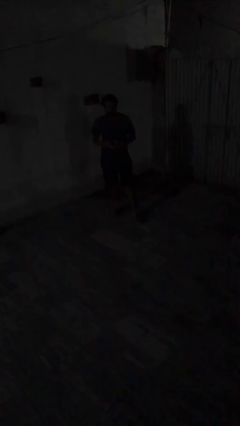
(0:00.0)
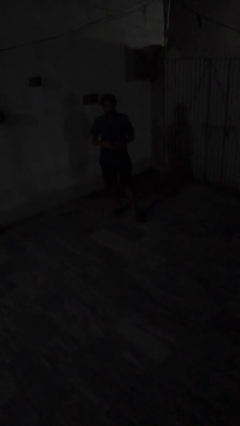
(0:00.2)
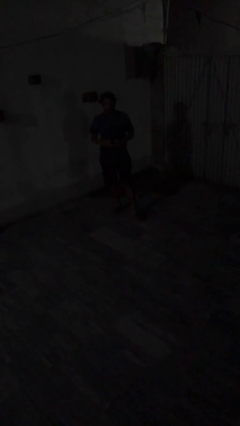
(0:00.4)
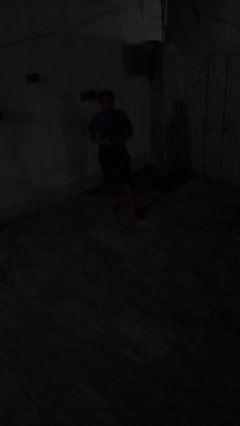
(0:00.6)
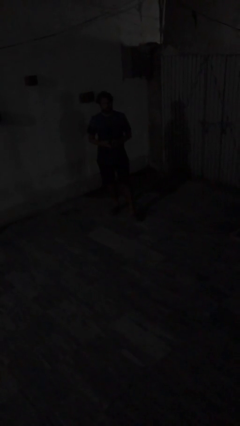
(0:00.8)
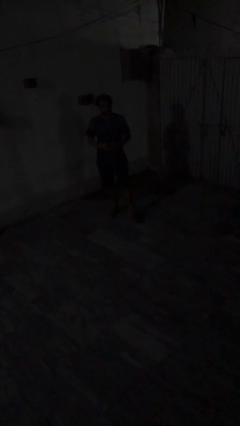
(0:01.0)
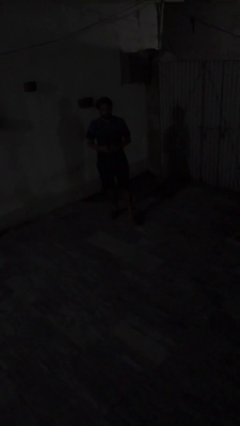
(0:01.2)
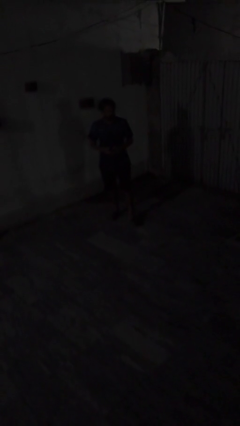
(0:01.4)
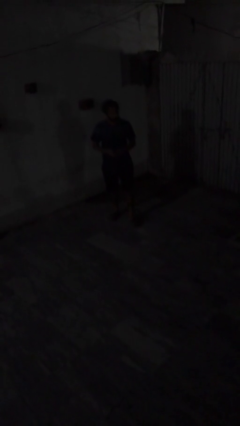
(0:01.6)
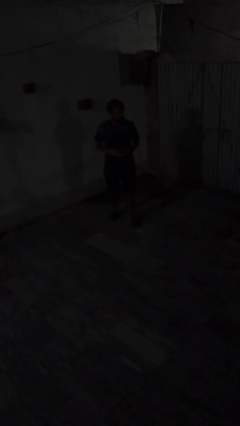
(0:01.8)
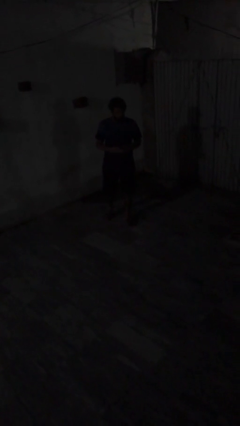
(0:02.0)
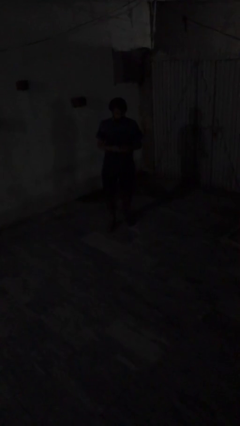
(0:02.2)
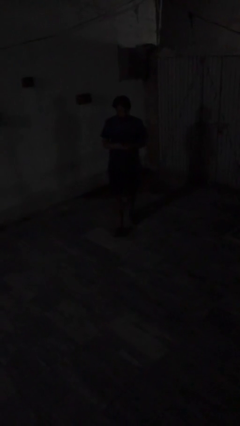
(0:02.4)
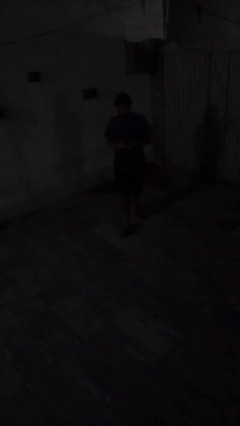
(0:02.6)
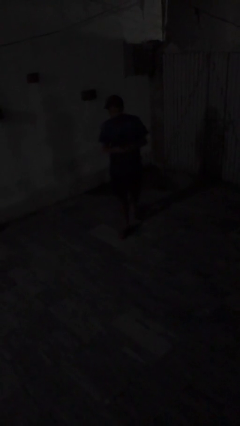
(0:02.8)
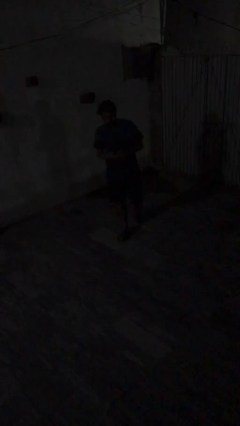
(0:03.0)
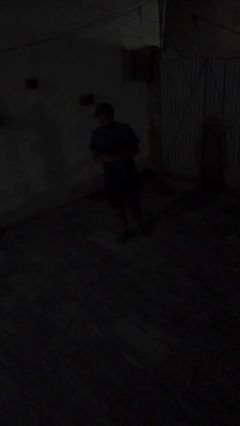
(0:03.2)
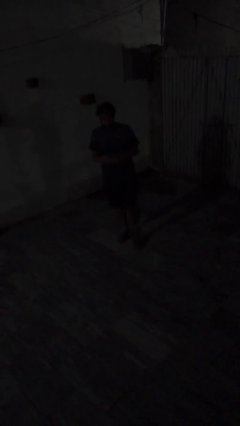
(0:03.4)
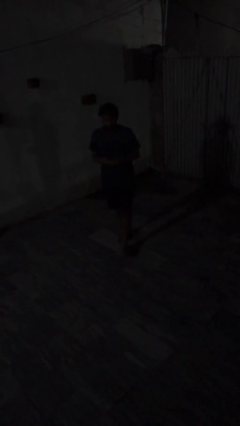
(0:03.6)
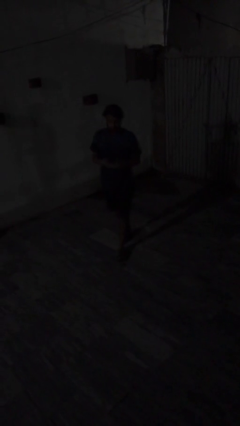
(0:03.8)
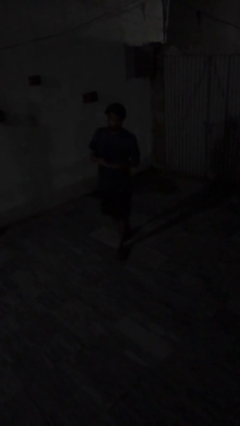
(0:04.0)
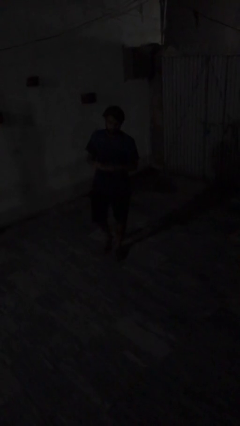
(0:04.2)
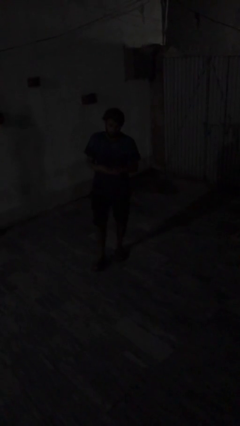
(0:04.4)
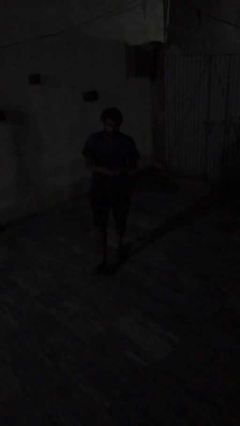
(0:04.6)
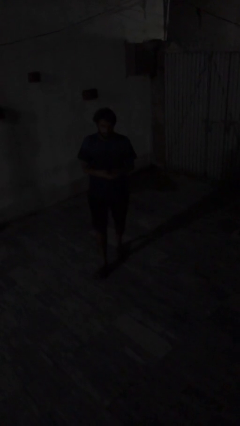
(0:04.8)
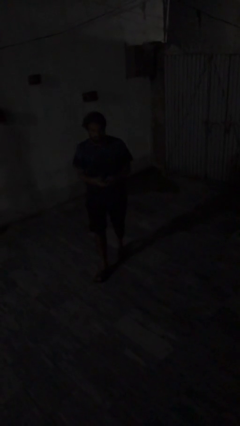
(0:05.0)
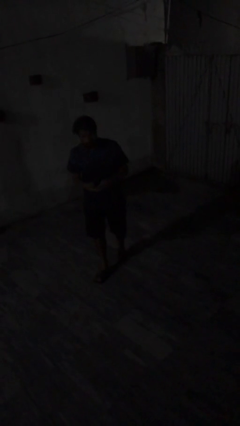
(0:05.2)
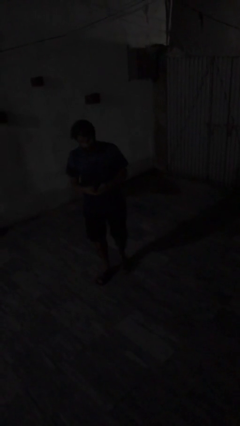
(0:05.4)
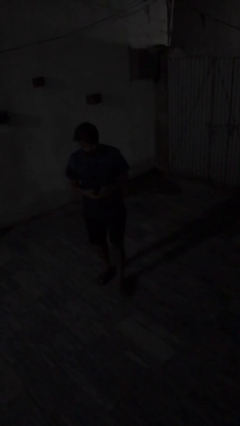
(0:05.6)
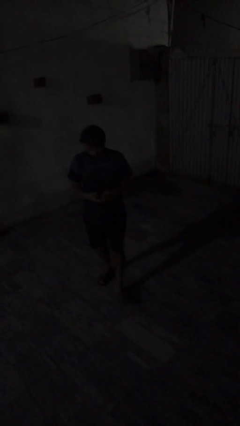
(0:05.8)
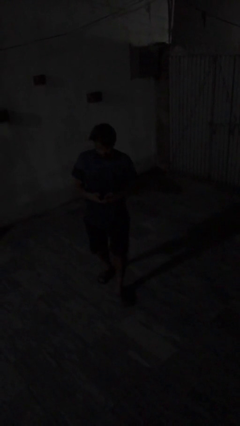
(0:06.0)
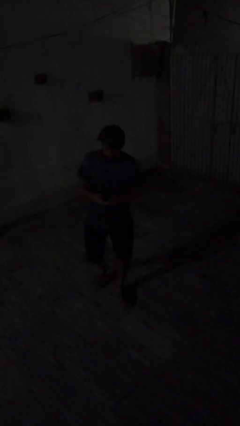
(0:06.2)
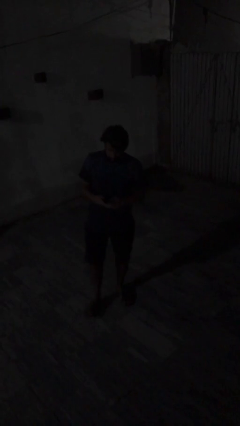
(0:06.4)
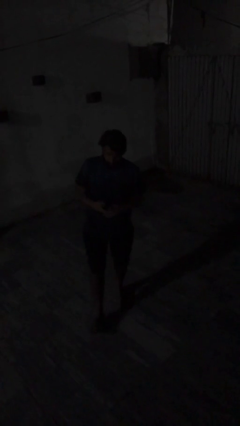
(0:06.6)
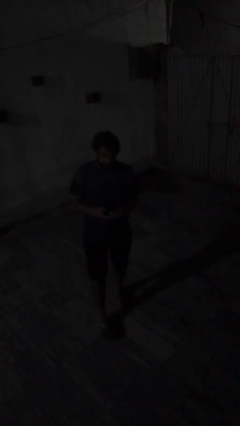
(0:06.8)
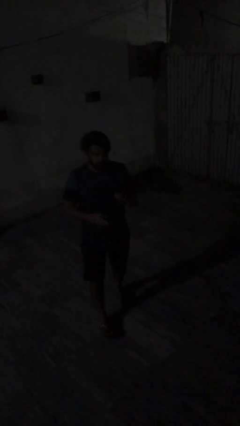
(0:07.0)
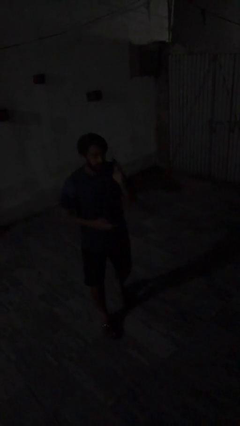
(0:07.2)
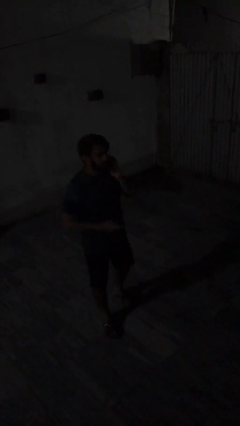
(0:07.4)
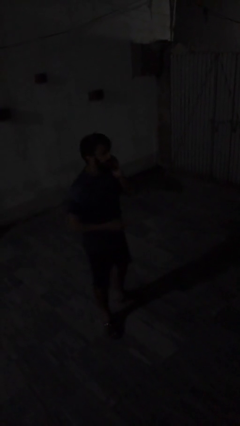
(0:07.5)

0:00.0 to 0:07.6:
person texts on phone

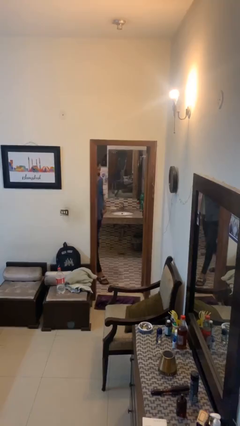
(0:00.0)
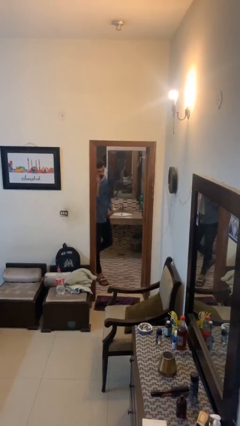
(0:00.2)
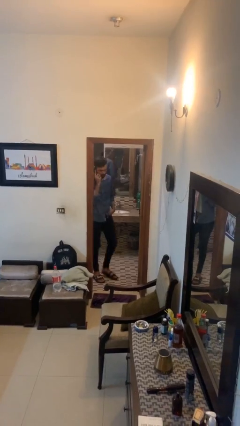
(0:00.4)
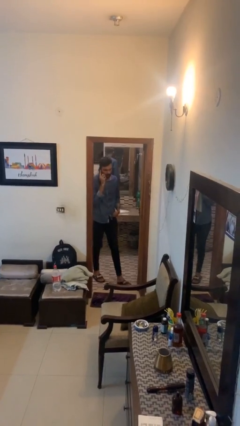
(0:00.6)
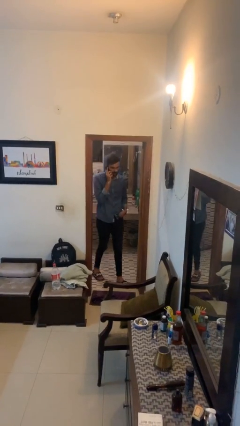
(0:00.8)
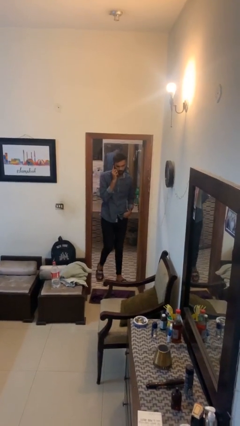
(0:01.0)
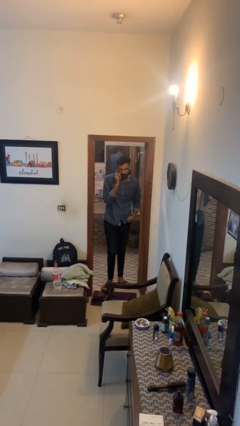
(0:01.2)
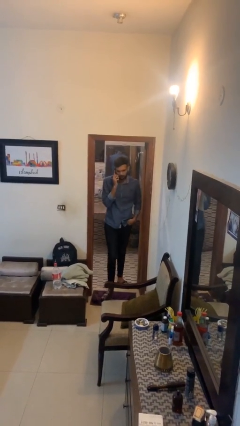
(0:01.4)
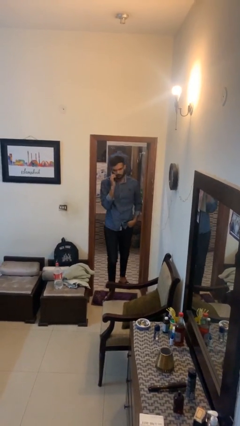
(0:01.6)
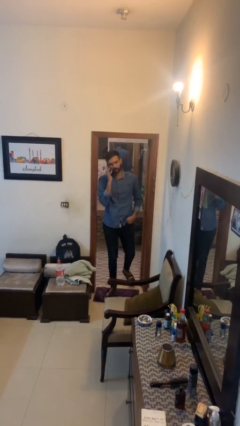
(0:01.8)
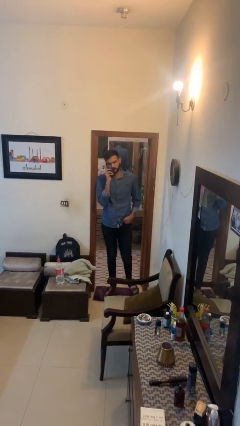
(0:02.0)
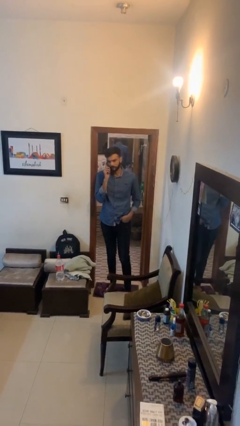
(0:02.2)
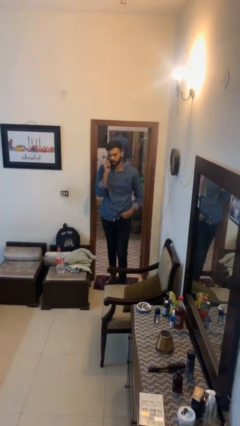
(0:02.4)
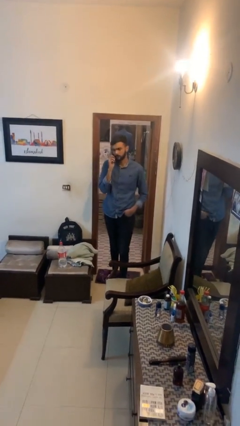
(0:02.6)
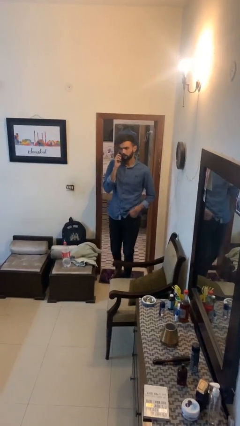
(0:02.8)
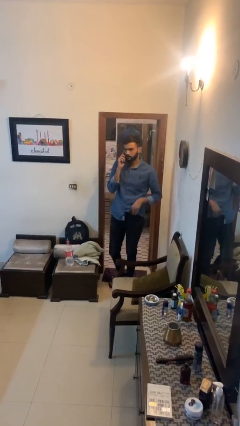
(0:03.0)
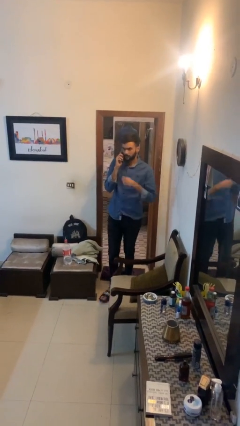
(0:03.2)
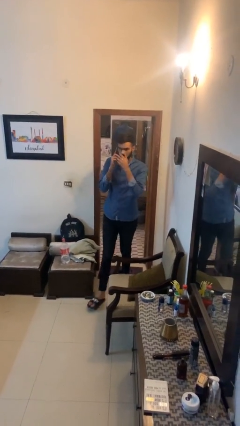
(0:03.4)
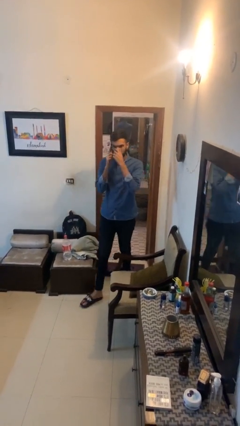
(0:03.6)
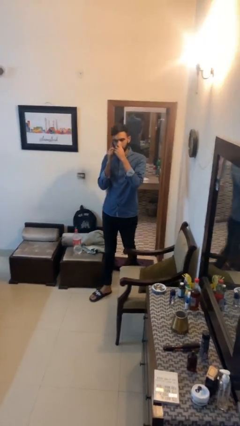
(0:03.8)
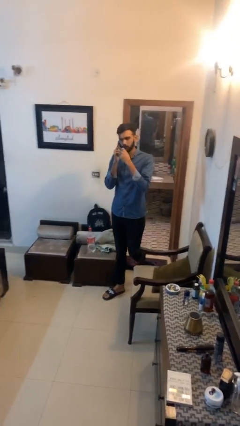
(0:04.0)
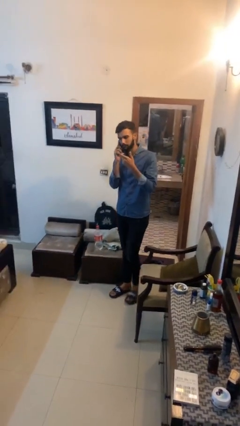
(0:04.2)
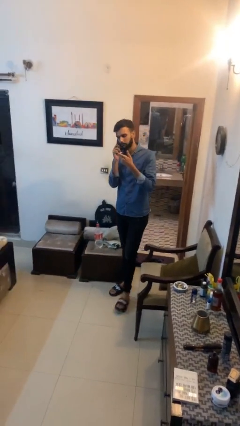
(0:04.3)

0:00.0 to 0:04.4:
person enters scene through structure

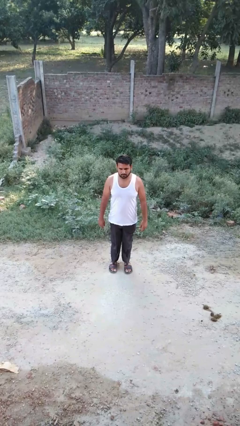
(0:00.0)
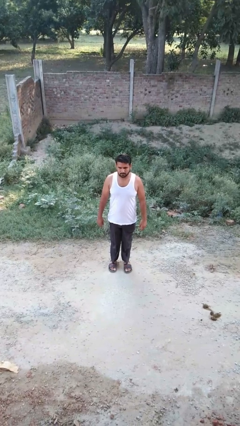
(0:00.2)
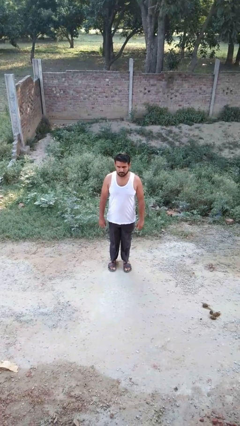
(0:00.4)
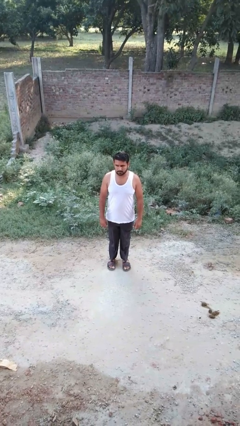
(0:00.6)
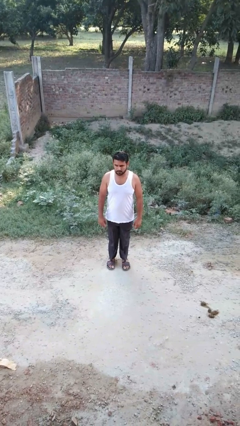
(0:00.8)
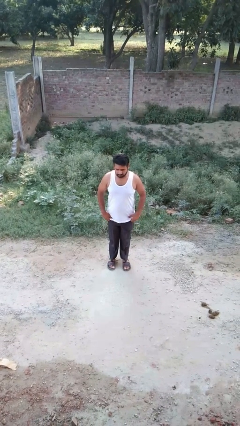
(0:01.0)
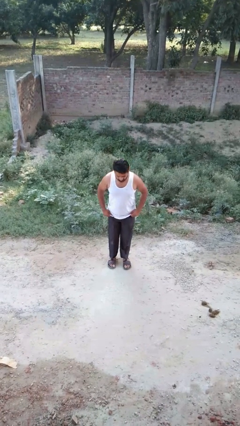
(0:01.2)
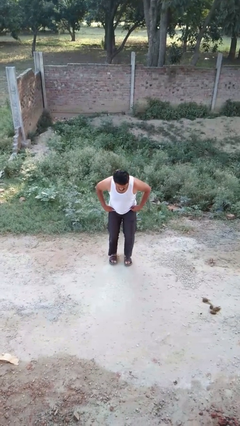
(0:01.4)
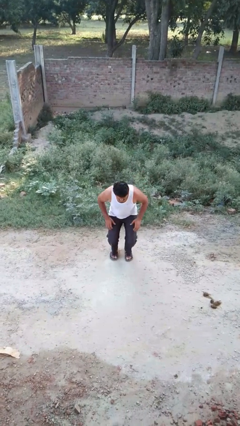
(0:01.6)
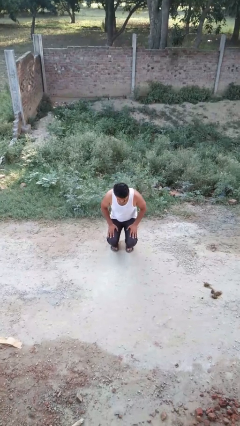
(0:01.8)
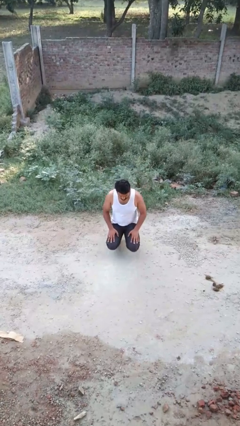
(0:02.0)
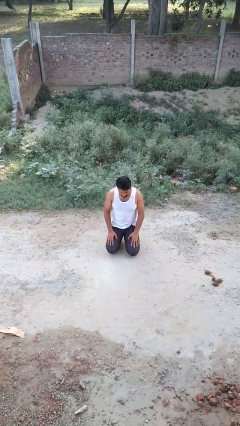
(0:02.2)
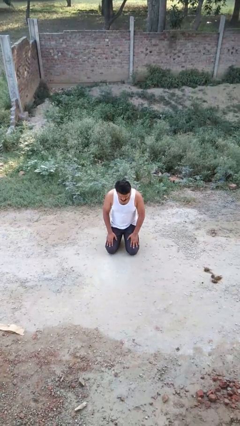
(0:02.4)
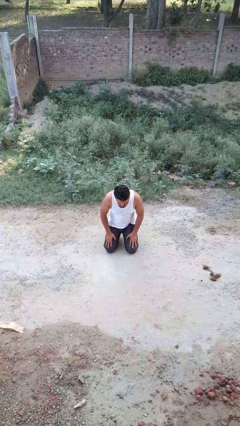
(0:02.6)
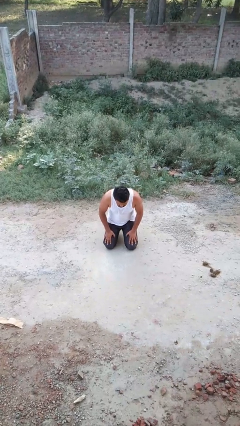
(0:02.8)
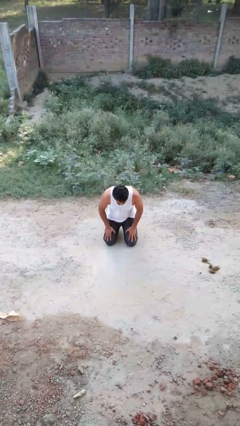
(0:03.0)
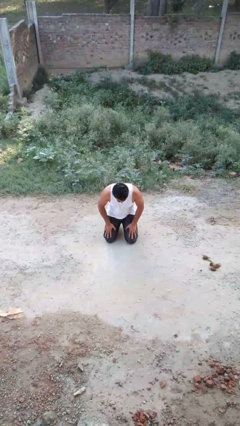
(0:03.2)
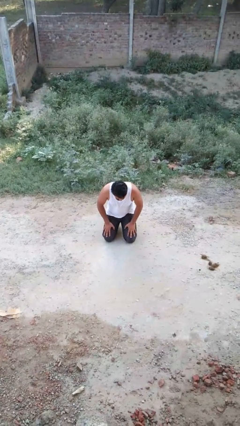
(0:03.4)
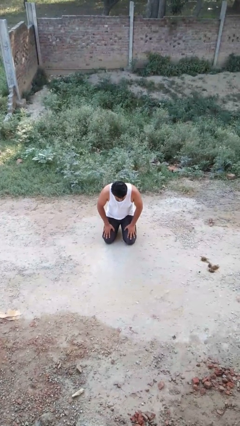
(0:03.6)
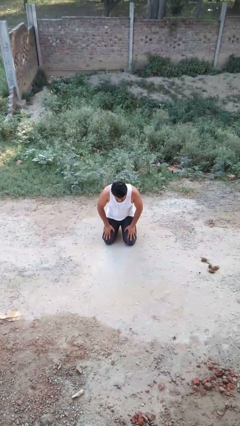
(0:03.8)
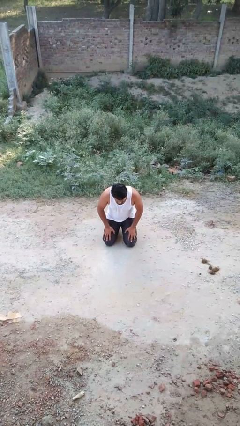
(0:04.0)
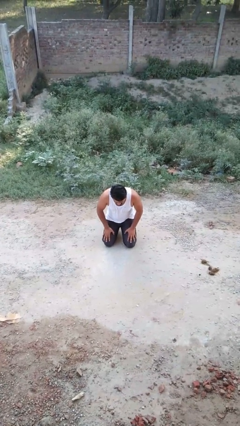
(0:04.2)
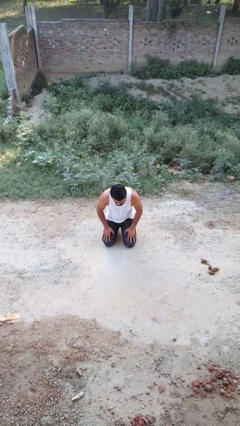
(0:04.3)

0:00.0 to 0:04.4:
person kneels

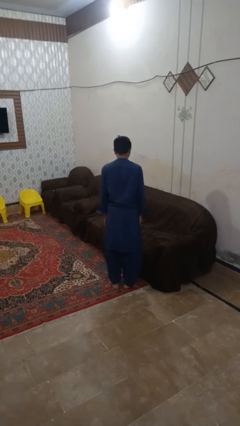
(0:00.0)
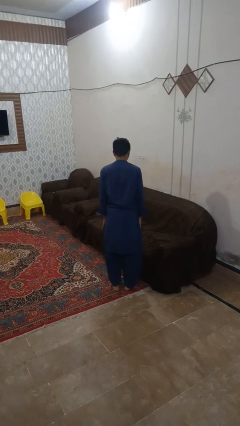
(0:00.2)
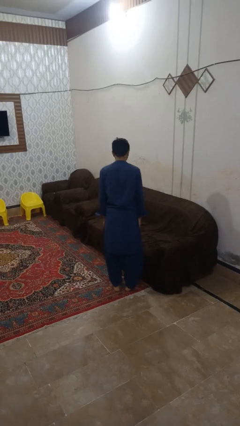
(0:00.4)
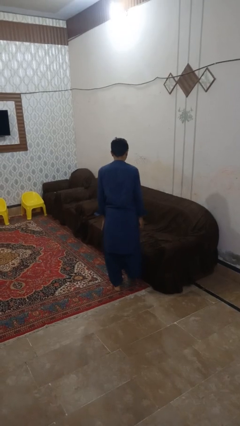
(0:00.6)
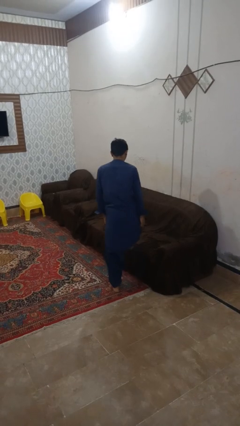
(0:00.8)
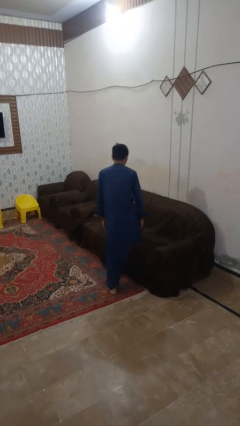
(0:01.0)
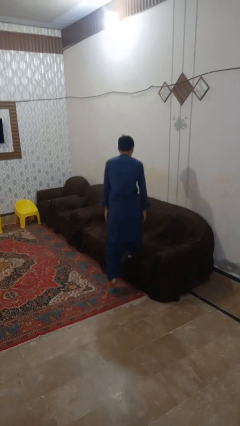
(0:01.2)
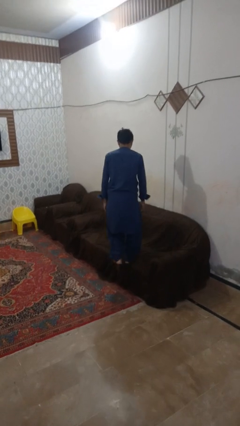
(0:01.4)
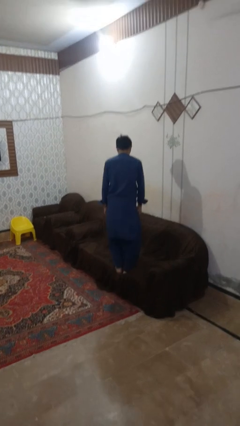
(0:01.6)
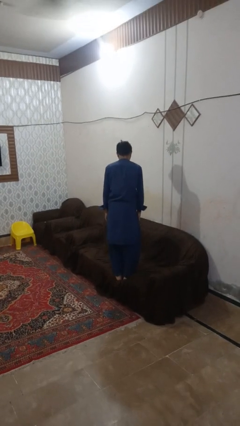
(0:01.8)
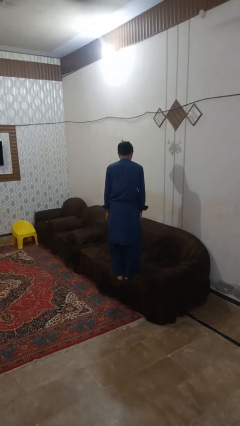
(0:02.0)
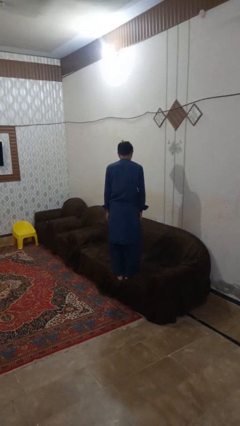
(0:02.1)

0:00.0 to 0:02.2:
person climbs on couch
